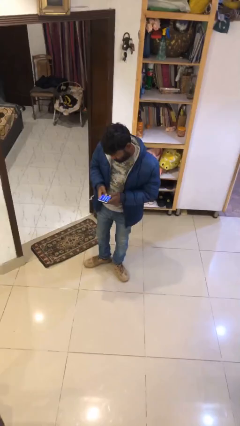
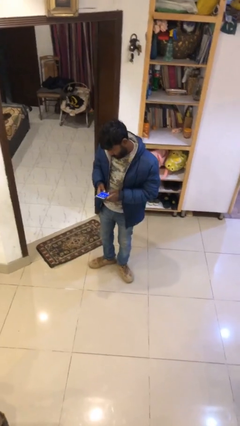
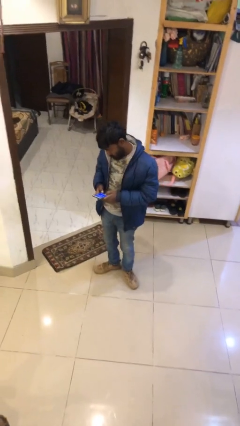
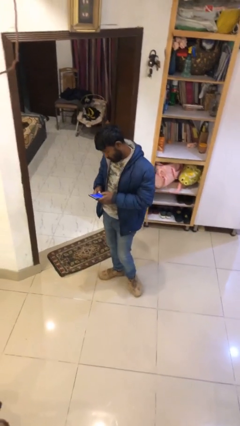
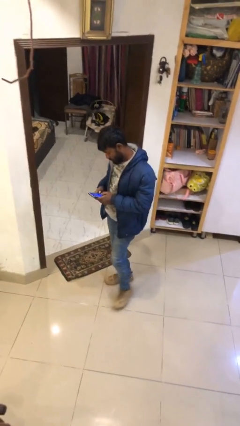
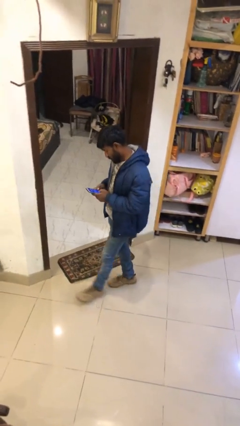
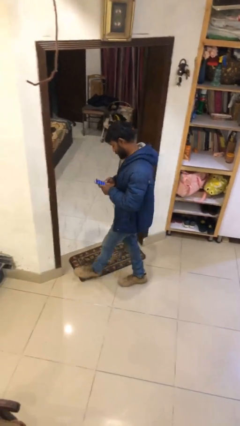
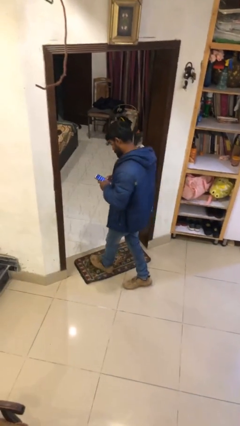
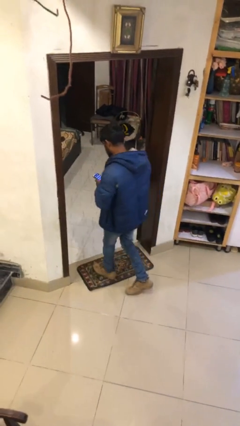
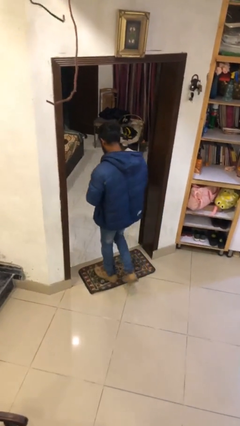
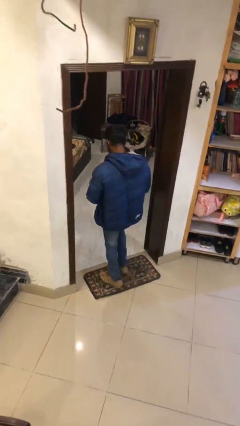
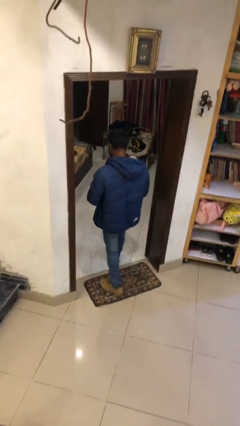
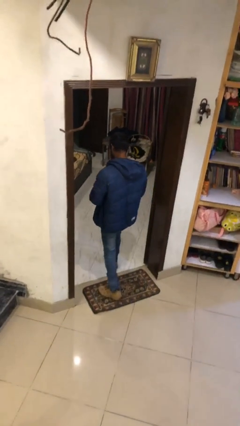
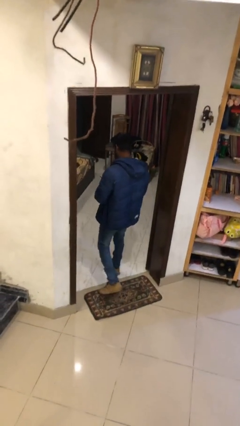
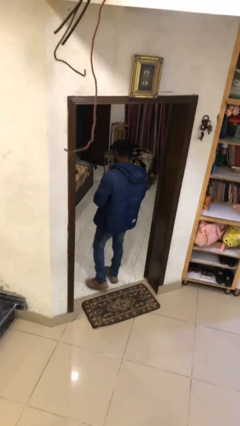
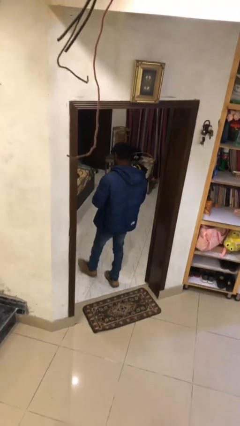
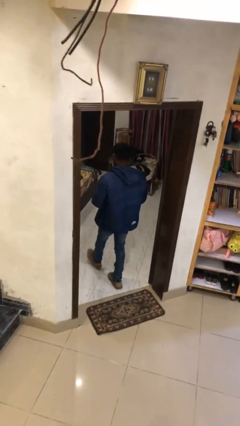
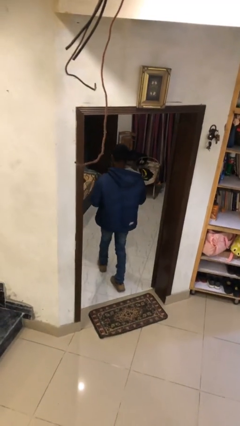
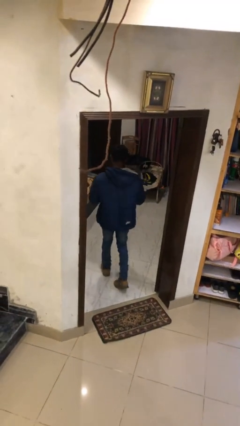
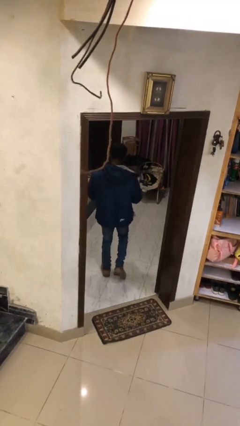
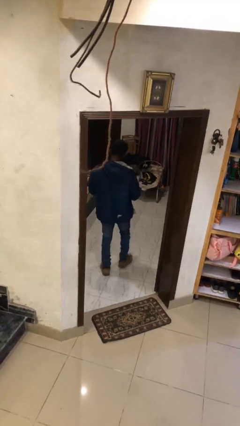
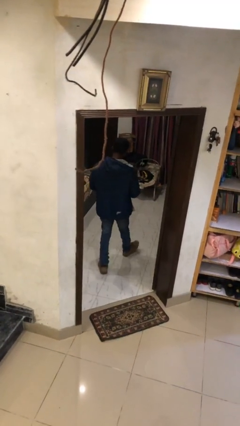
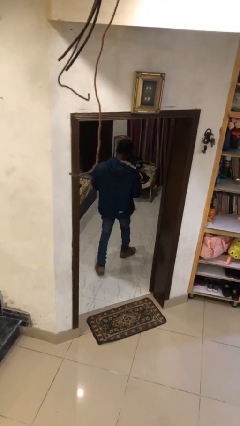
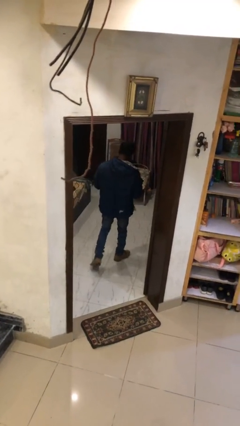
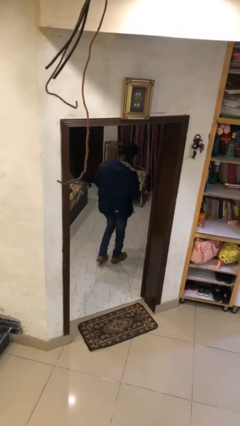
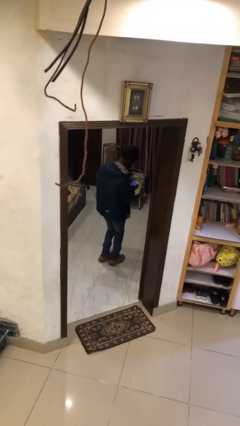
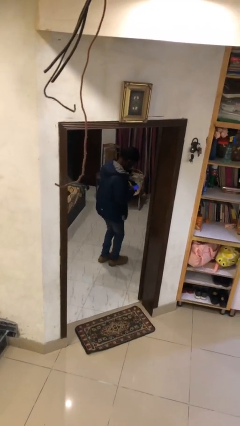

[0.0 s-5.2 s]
person exits scene through structure

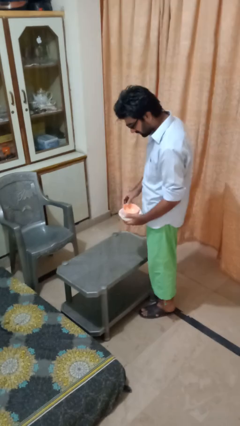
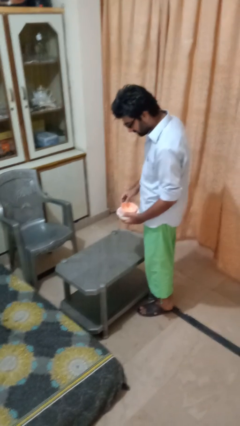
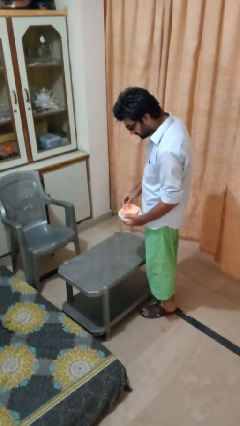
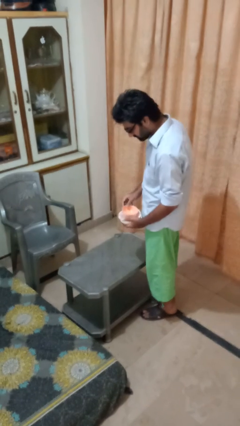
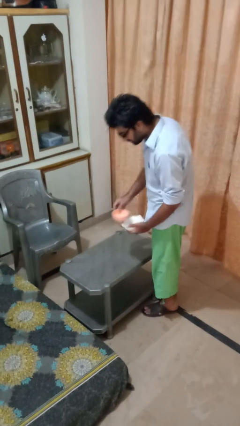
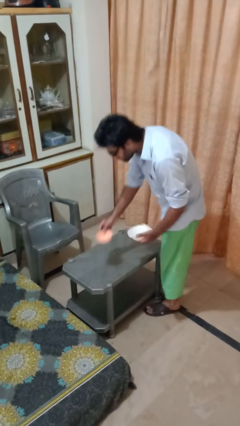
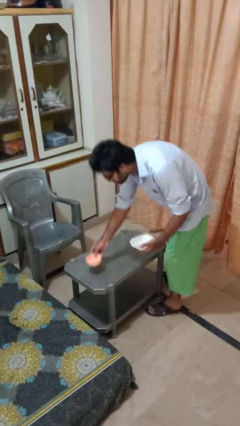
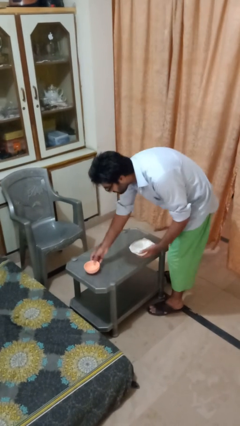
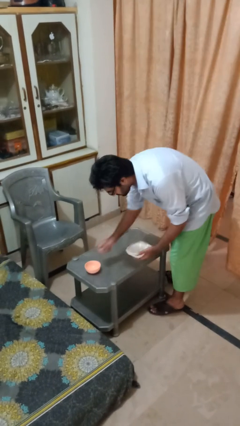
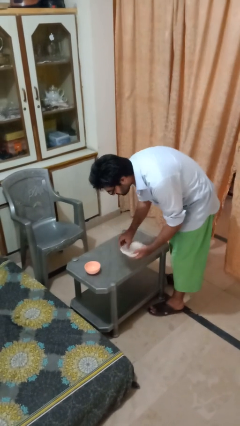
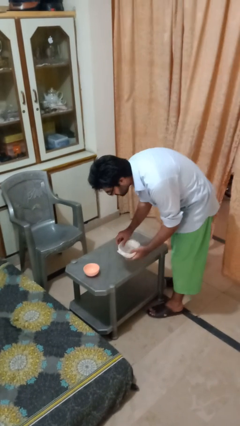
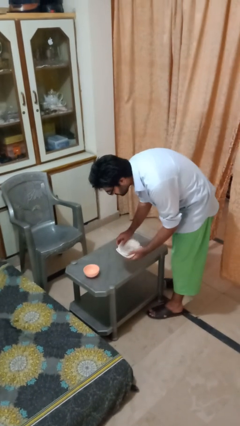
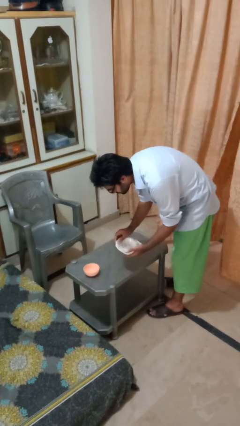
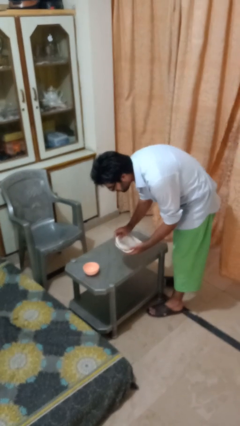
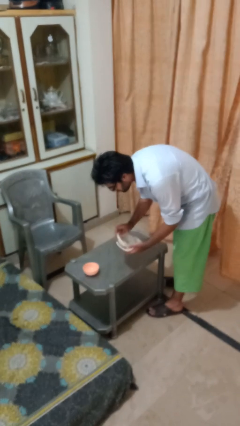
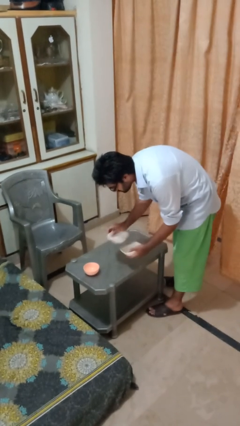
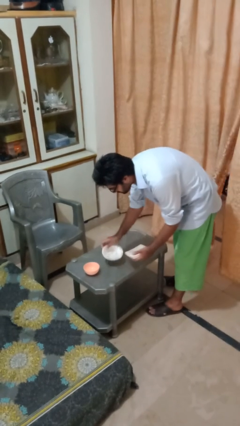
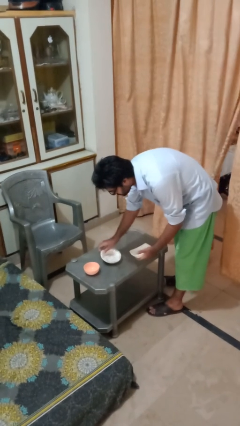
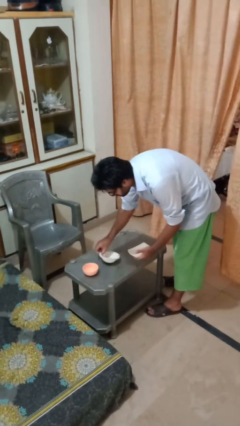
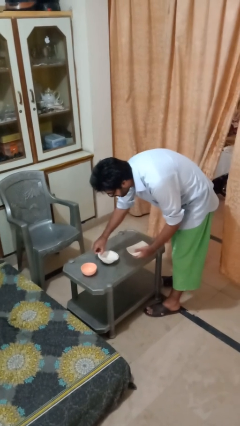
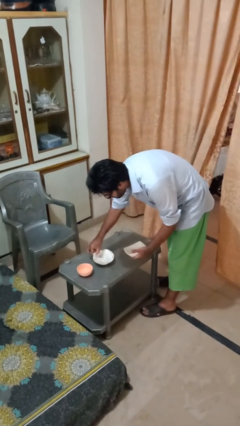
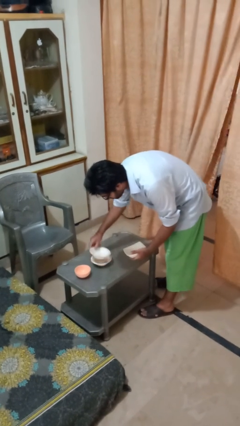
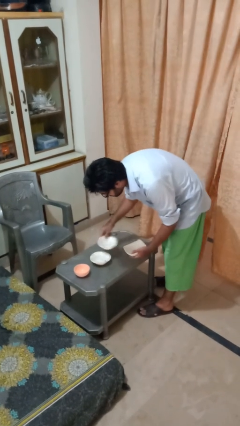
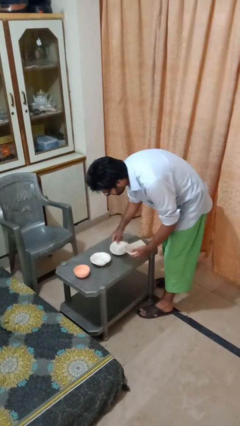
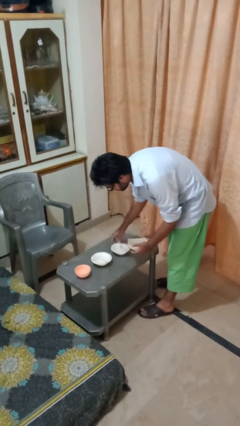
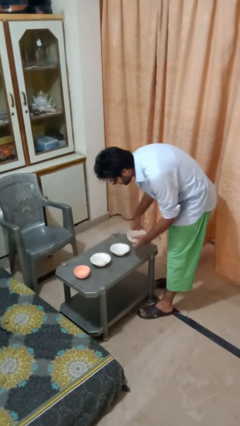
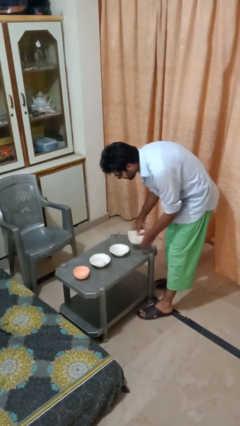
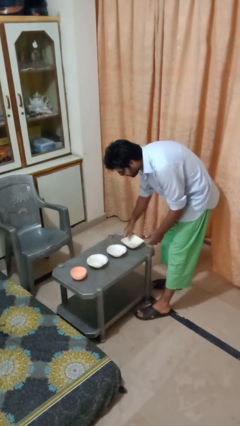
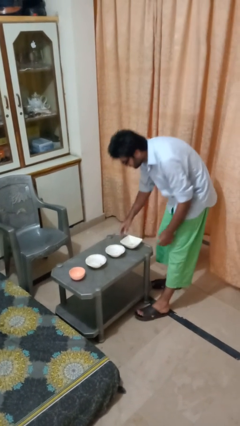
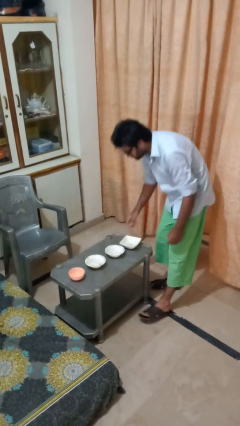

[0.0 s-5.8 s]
person sets table

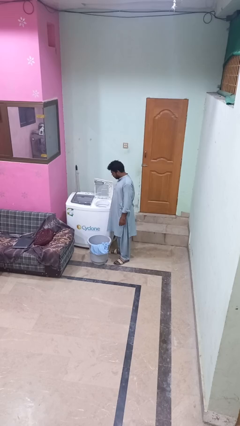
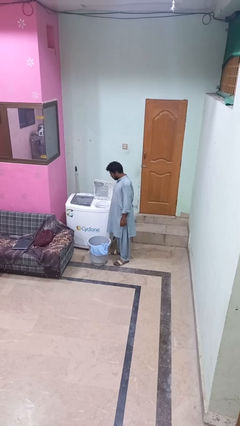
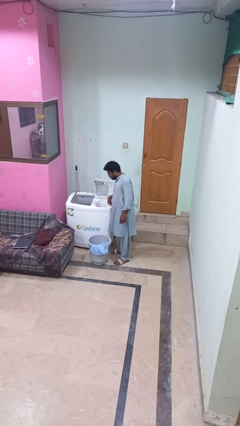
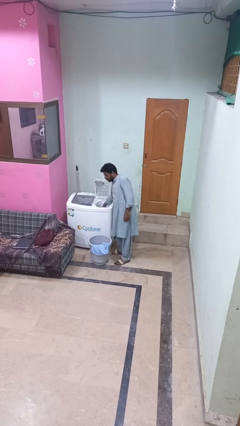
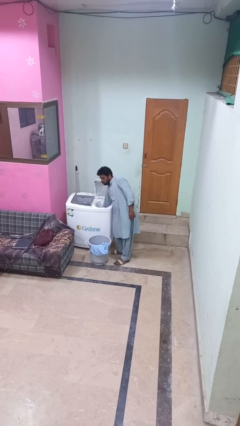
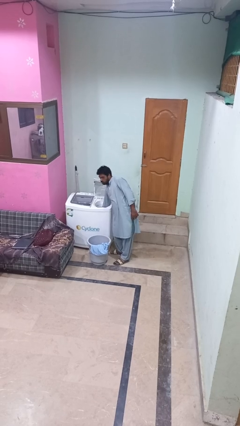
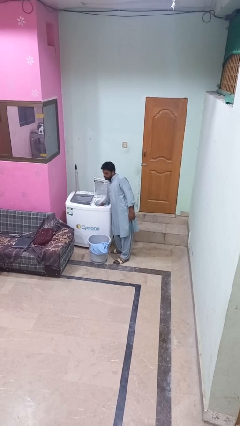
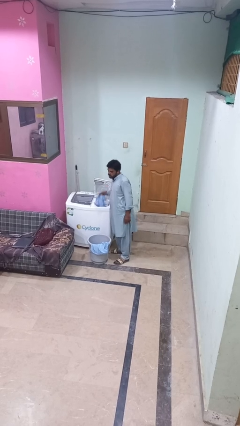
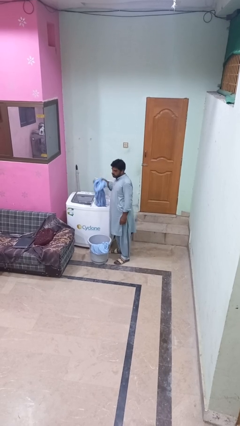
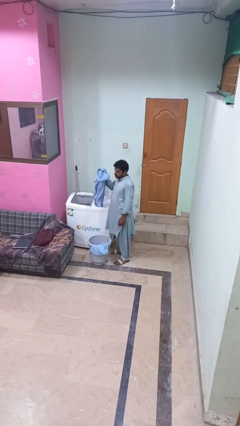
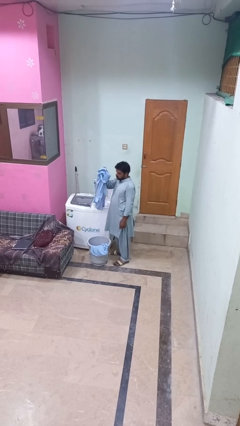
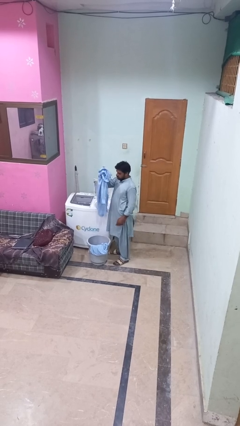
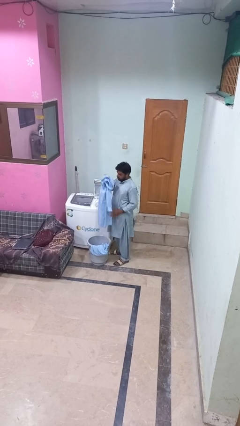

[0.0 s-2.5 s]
person unloads dryer

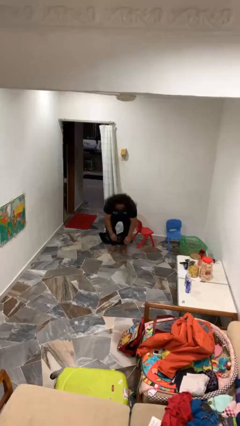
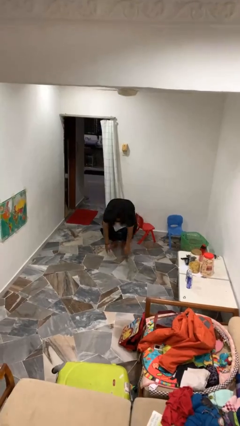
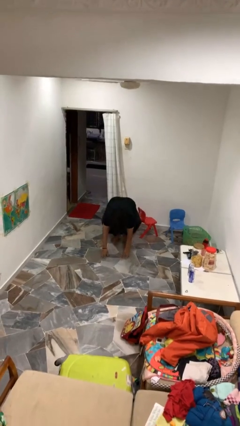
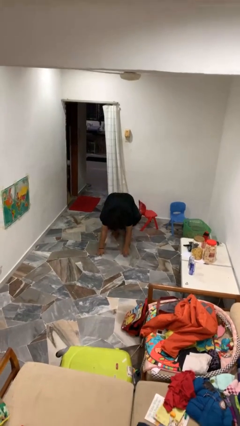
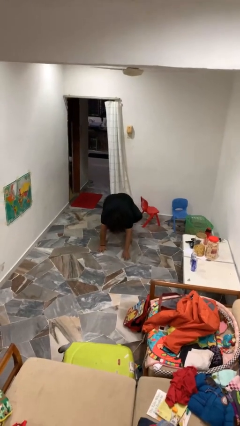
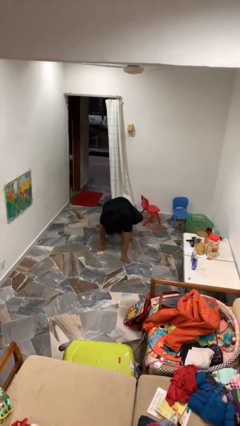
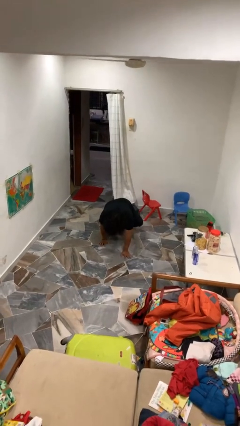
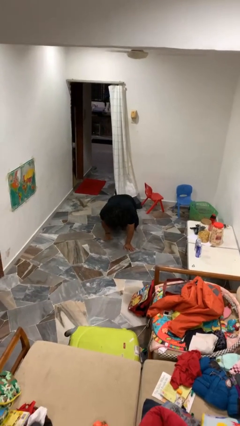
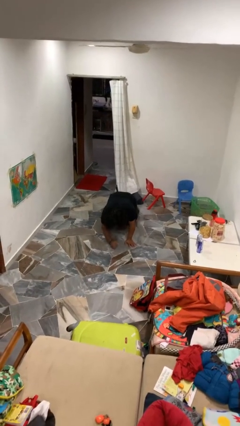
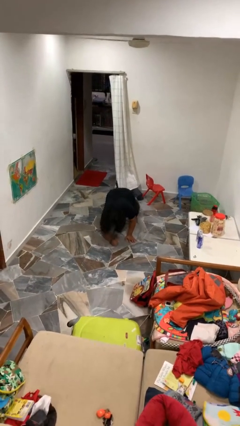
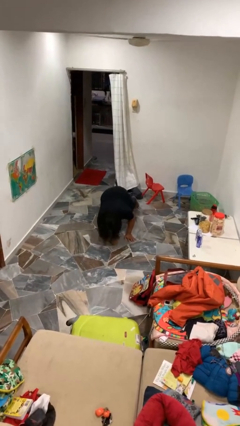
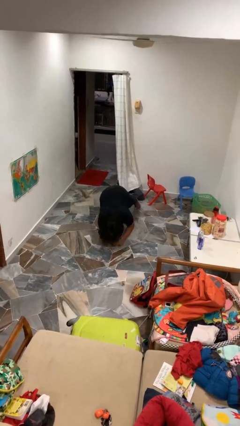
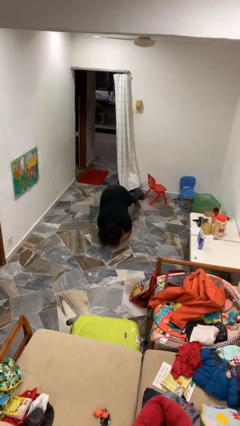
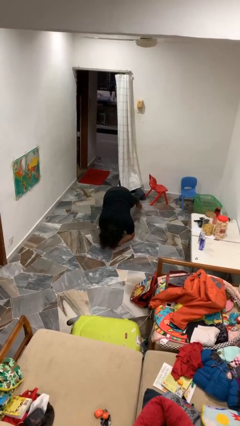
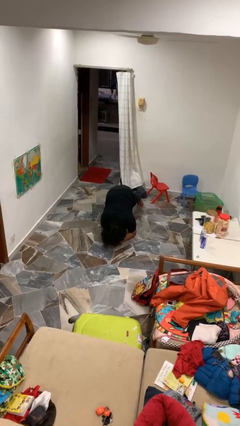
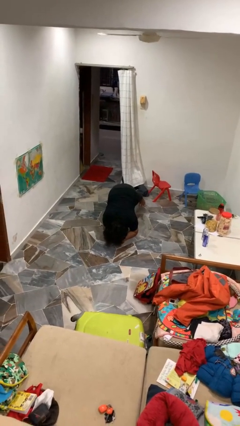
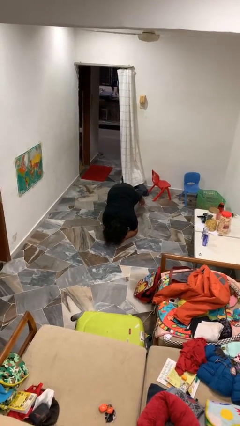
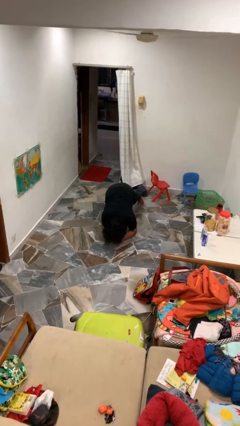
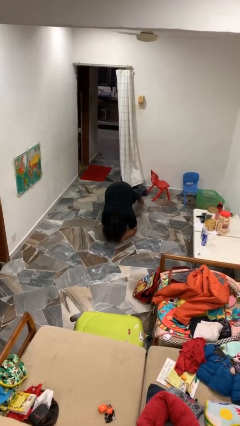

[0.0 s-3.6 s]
person exercises with plank

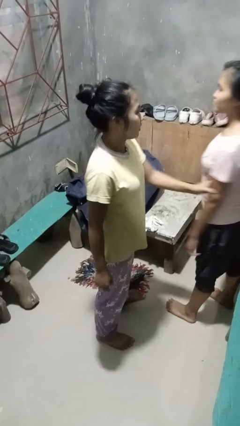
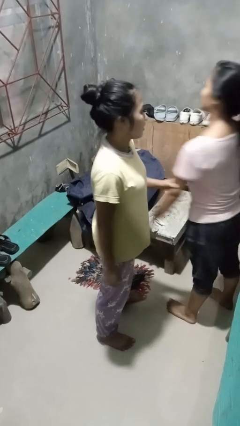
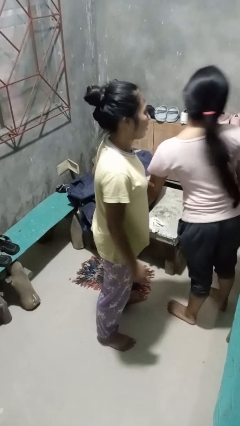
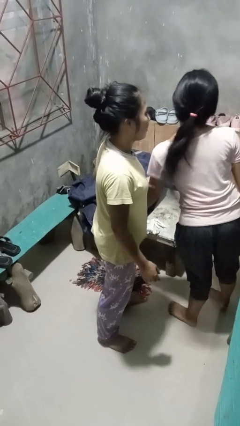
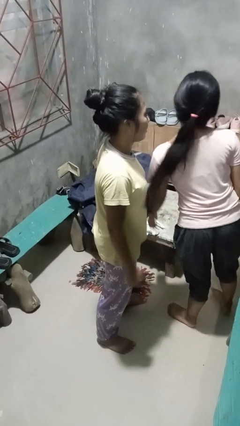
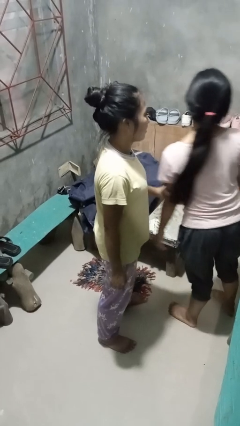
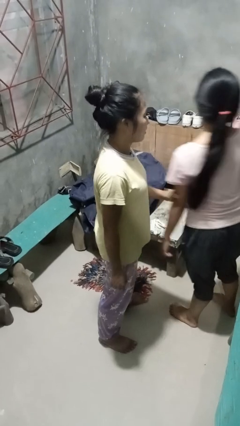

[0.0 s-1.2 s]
person grabs person by bicep
